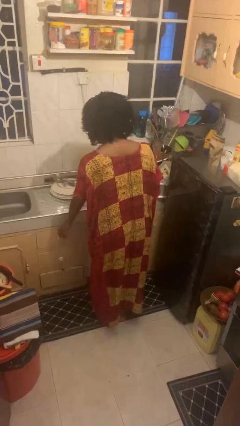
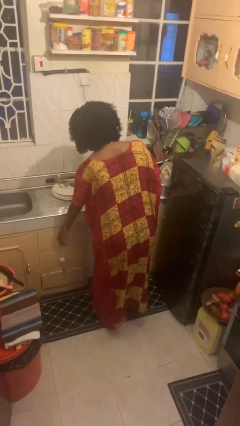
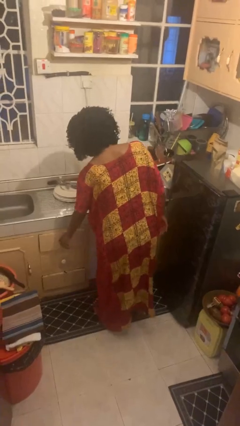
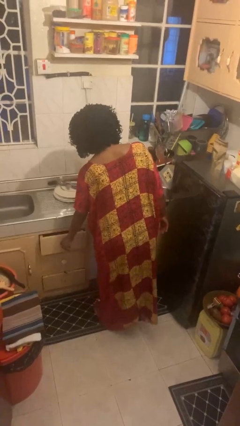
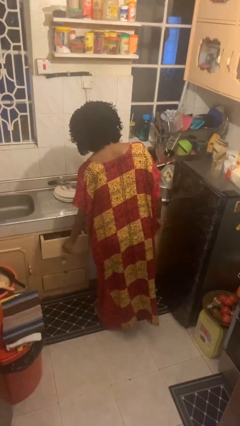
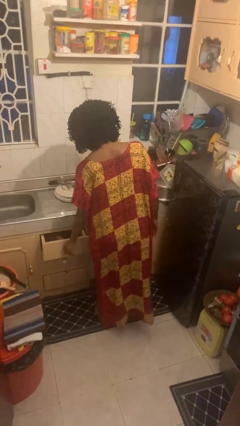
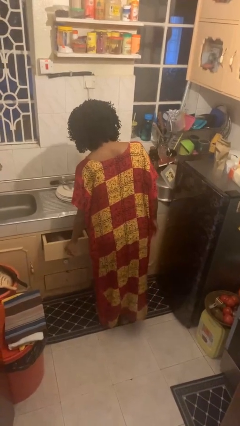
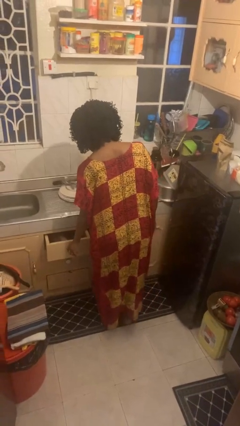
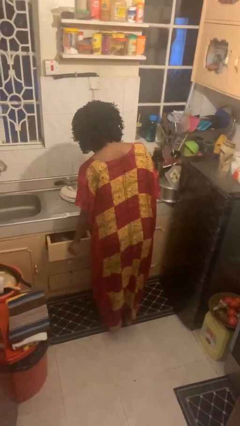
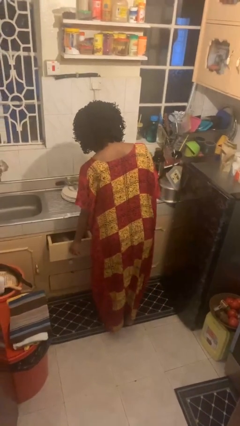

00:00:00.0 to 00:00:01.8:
person opens kitchen drawer

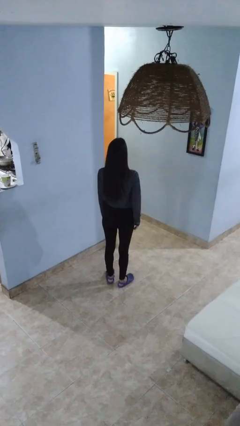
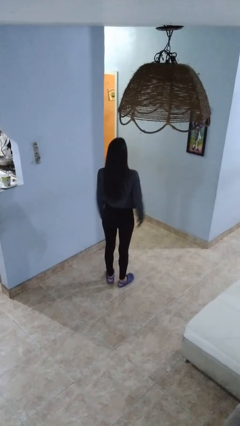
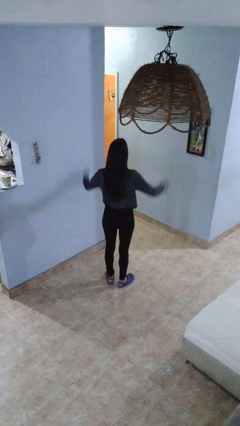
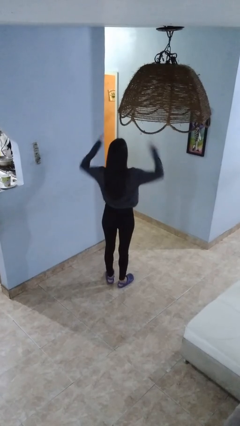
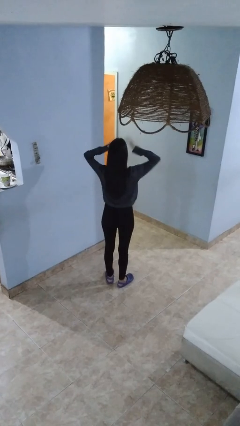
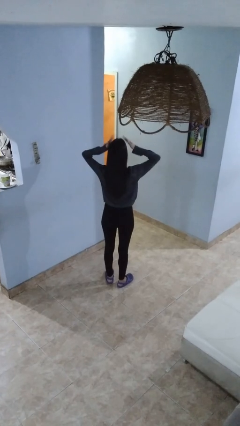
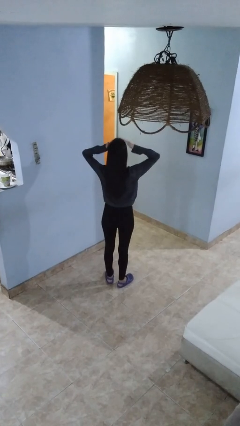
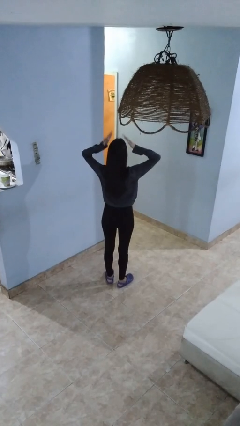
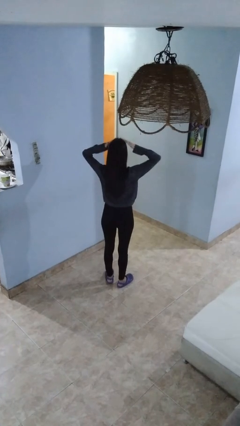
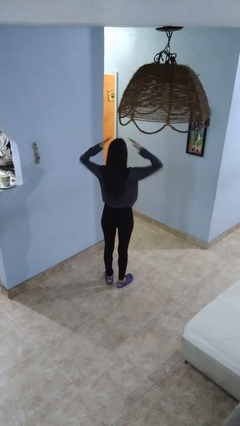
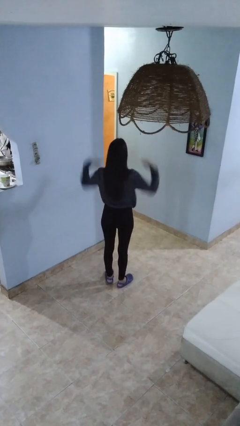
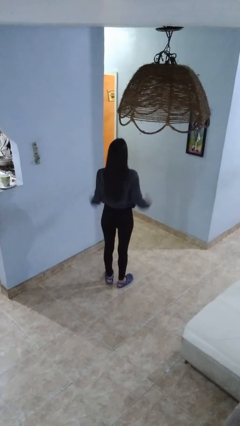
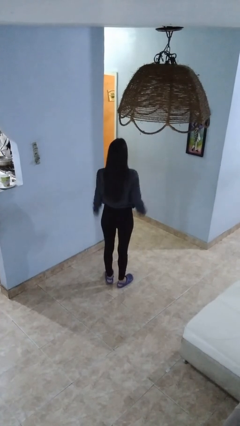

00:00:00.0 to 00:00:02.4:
person pats head

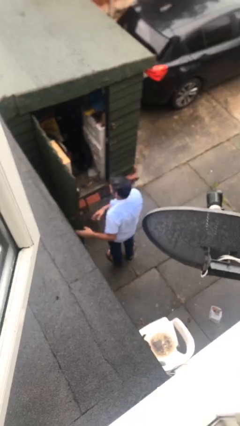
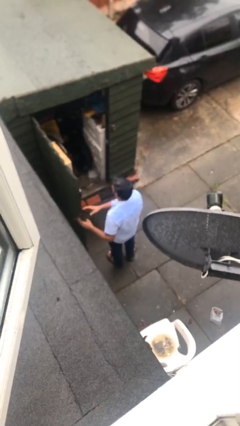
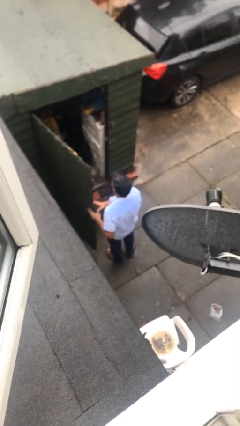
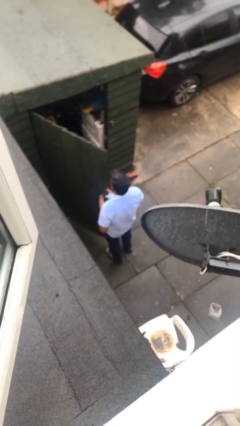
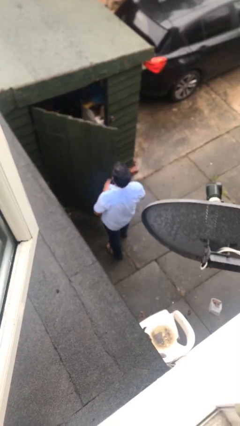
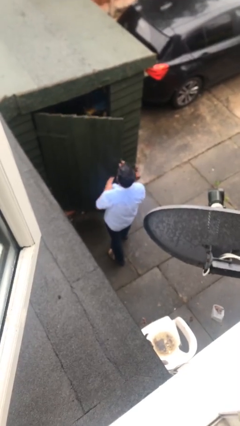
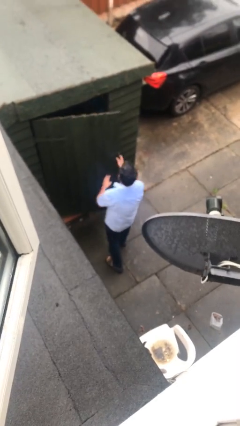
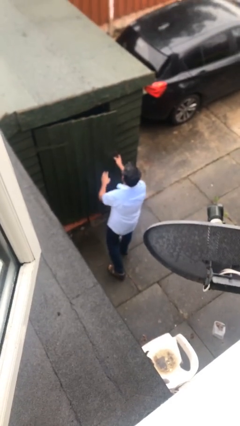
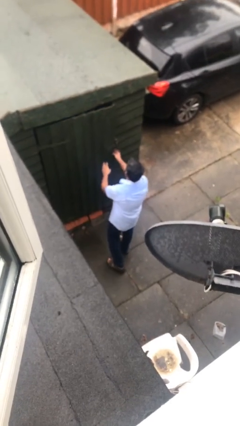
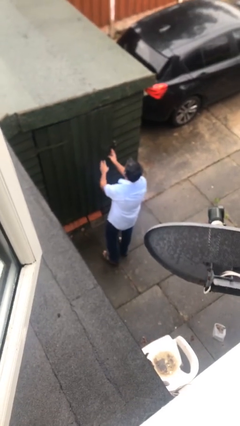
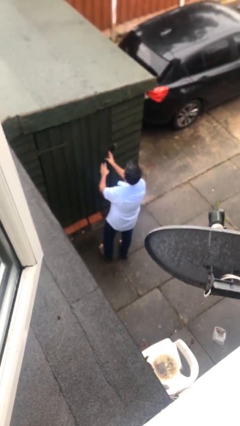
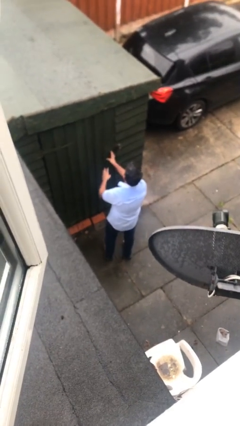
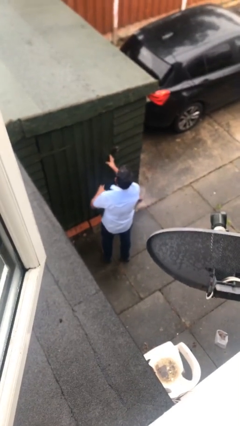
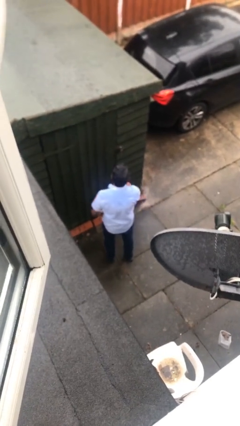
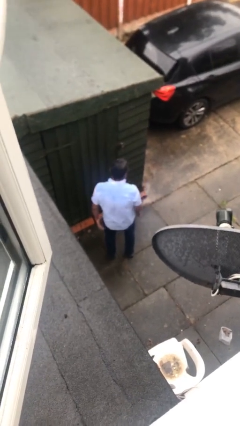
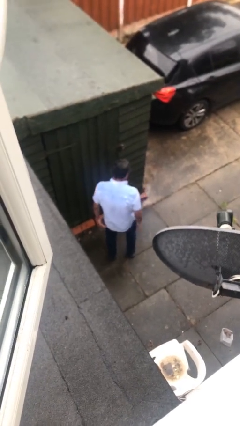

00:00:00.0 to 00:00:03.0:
person closes facility door

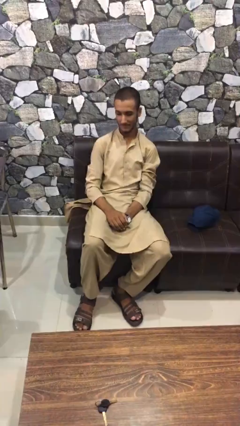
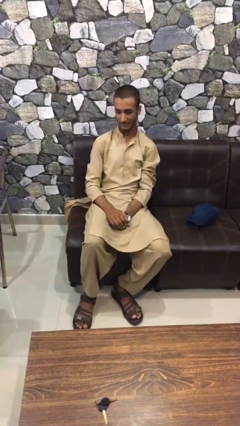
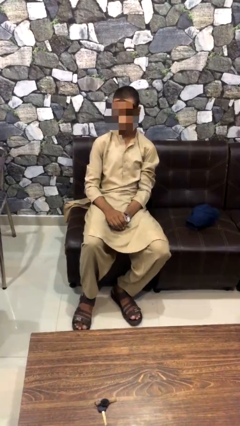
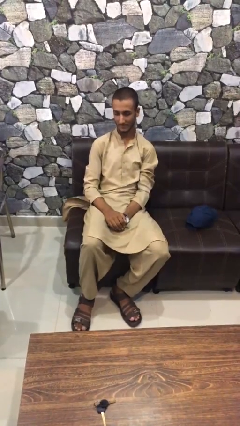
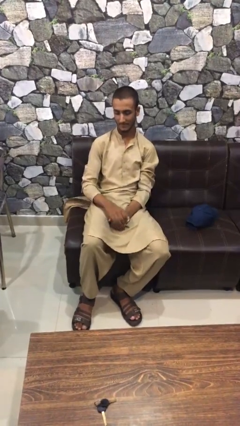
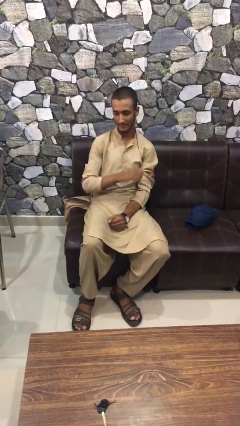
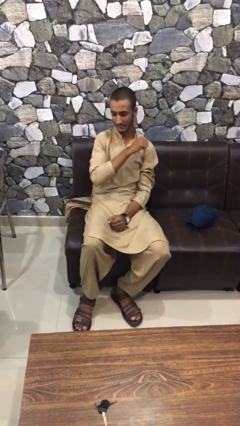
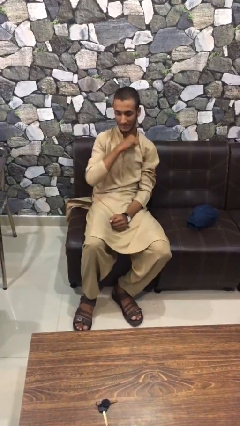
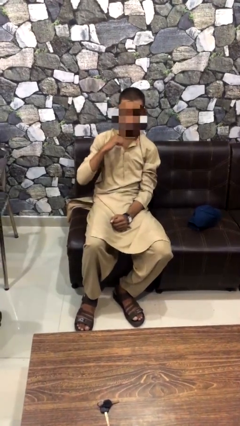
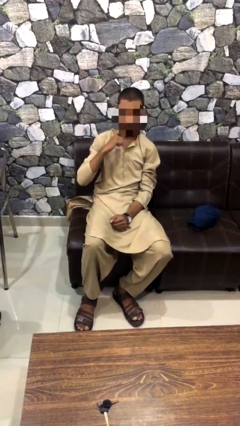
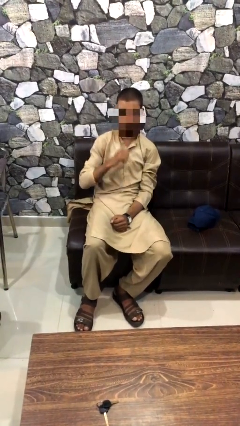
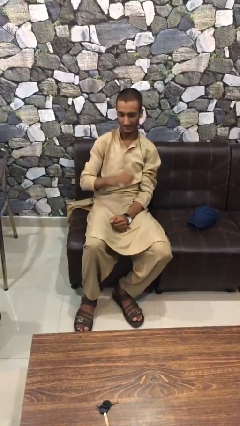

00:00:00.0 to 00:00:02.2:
person gestures cut

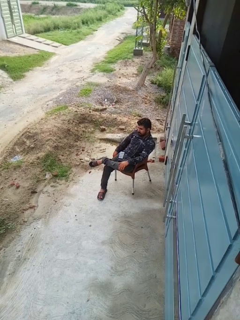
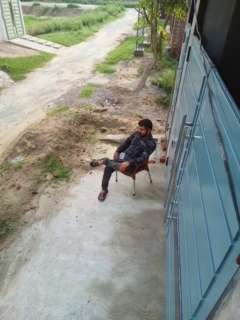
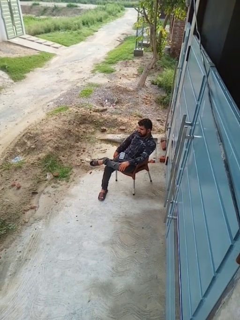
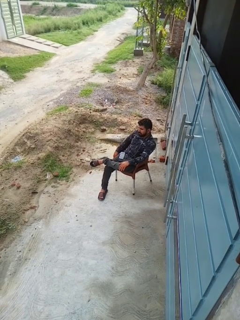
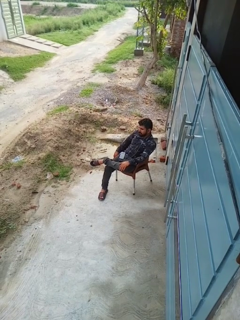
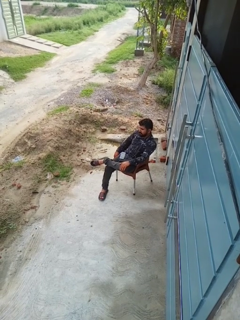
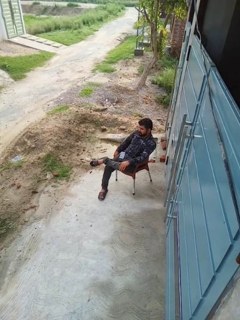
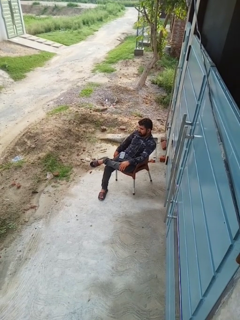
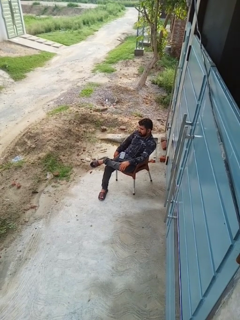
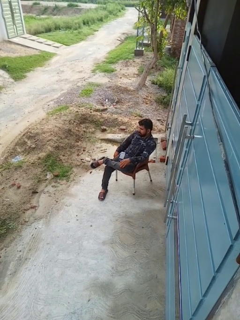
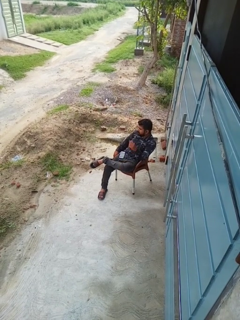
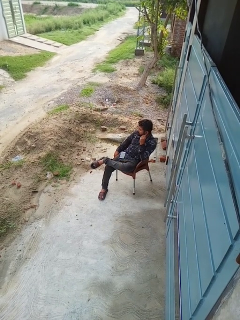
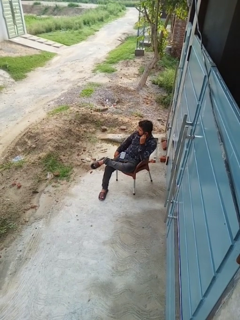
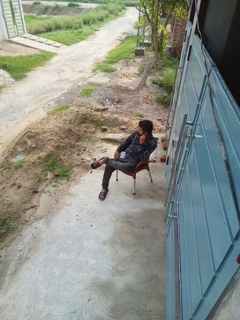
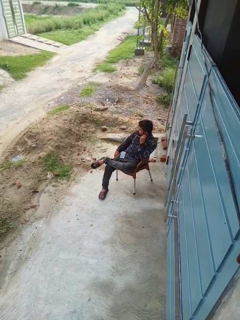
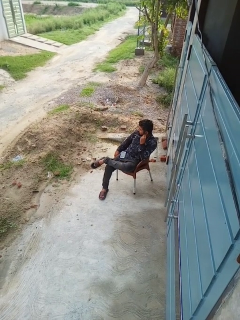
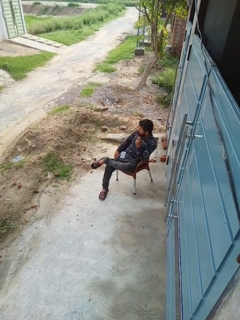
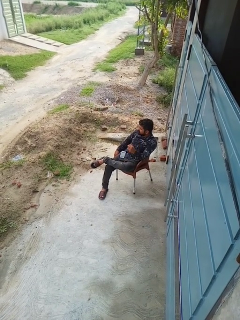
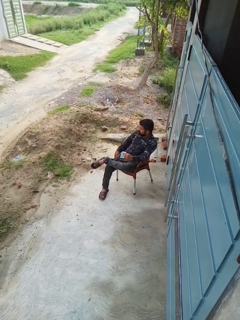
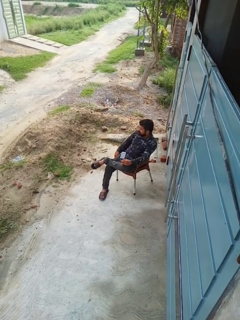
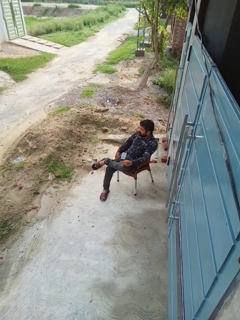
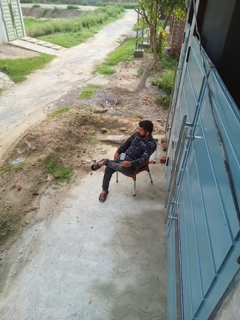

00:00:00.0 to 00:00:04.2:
person takes off headphones

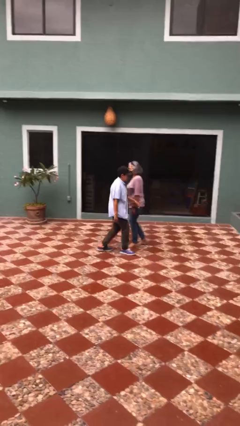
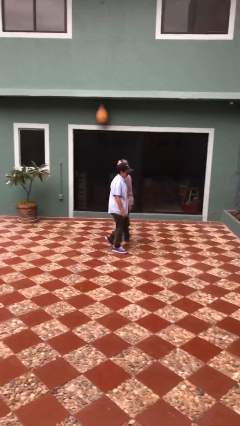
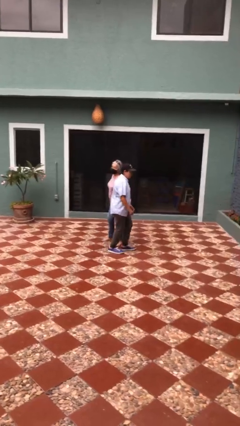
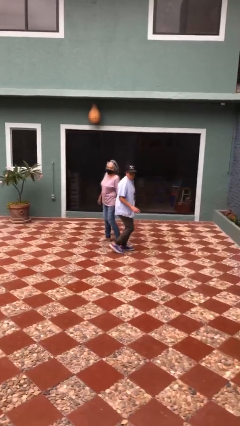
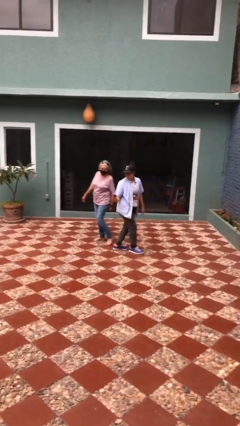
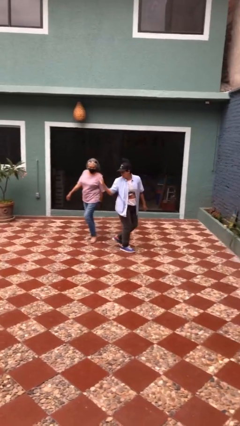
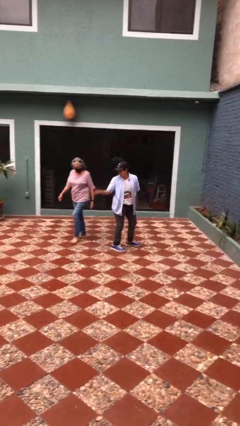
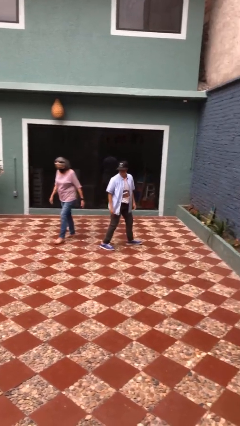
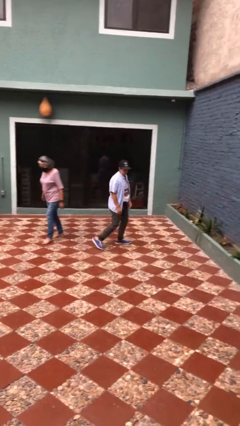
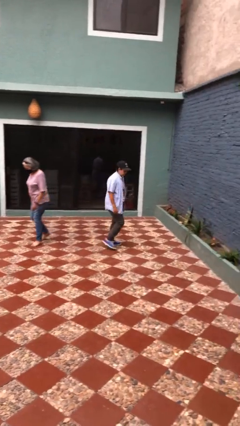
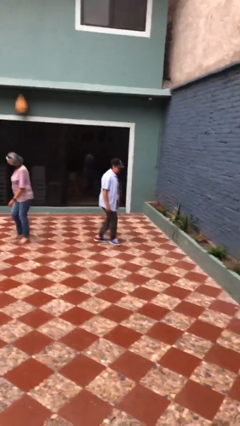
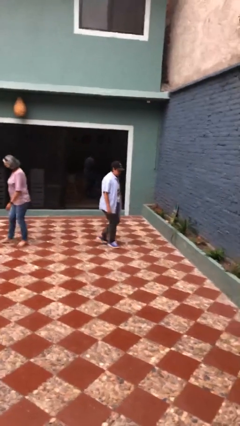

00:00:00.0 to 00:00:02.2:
person bumps into person

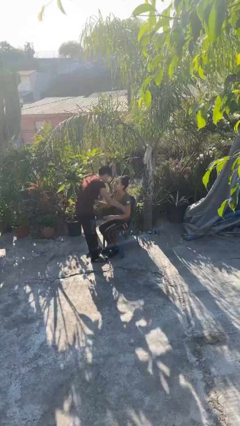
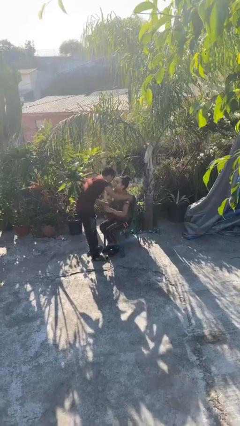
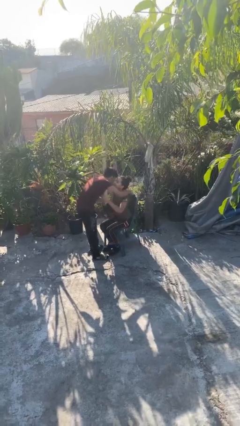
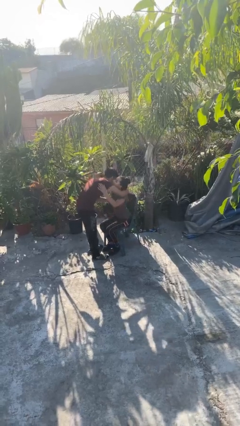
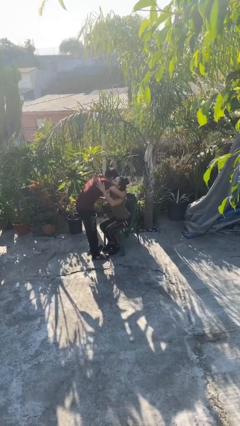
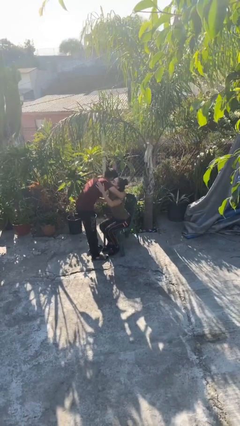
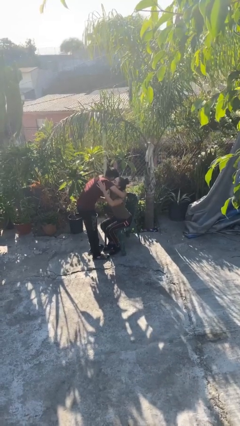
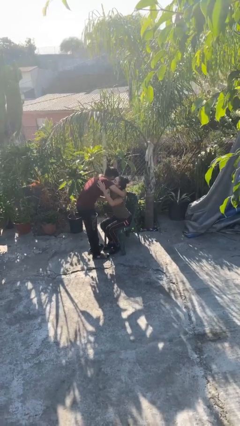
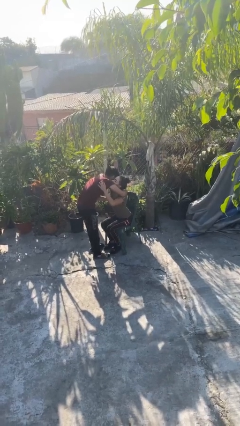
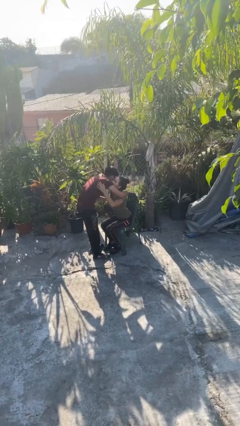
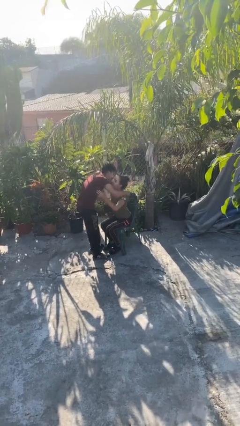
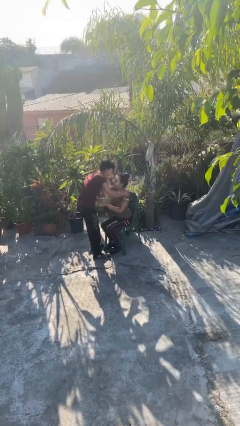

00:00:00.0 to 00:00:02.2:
person embraces person
